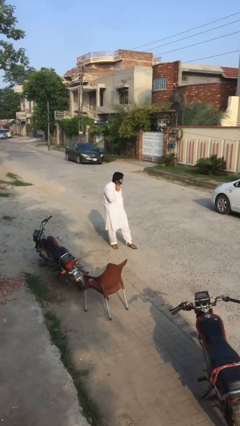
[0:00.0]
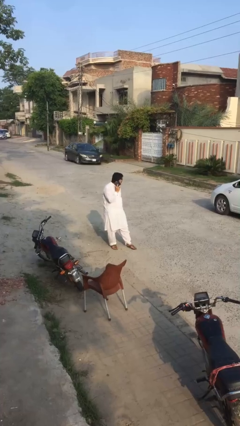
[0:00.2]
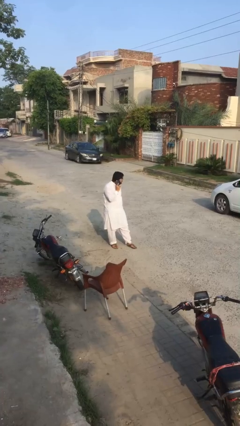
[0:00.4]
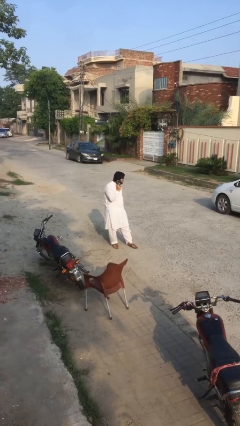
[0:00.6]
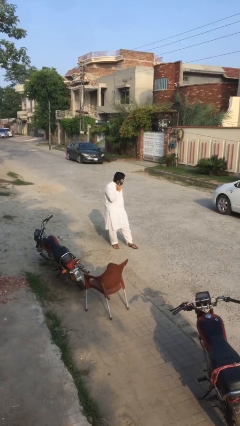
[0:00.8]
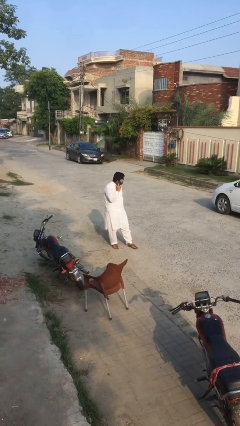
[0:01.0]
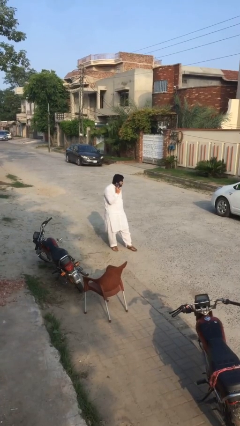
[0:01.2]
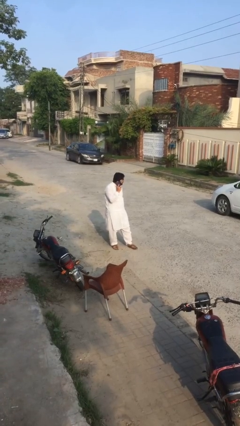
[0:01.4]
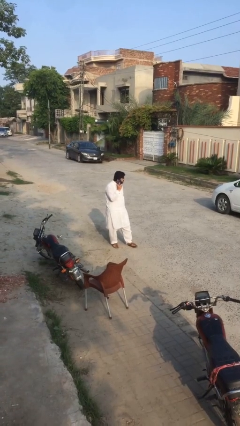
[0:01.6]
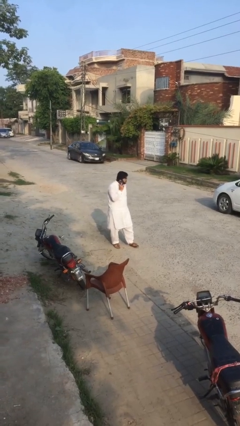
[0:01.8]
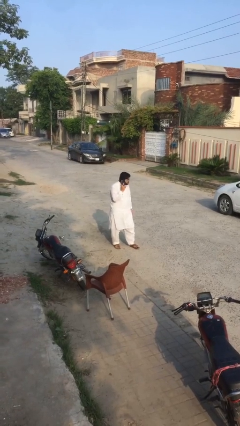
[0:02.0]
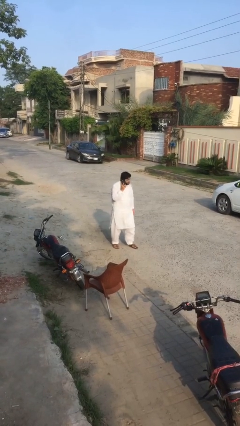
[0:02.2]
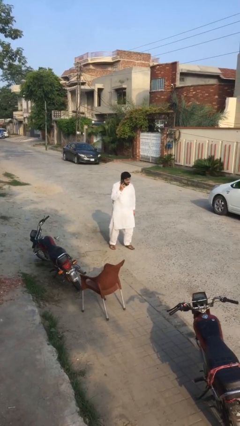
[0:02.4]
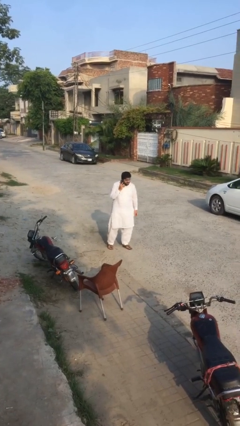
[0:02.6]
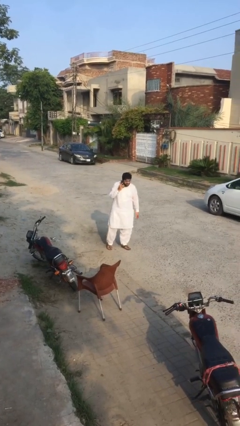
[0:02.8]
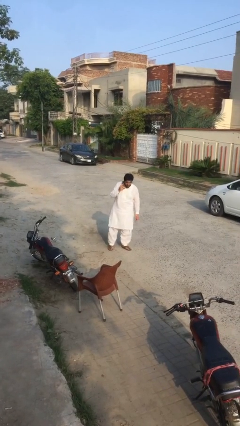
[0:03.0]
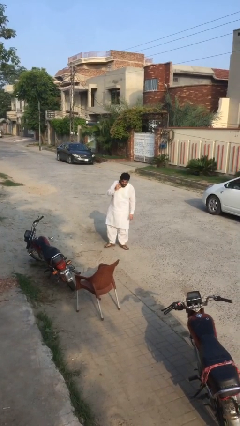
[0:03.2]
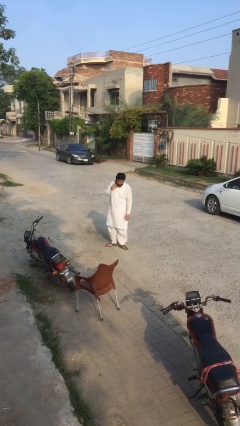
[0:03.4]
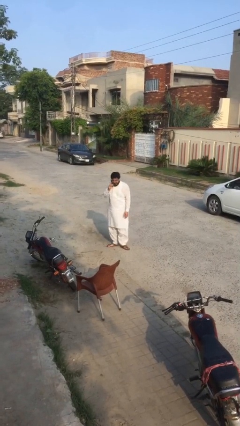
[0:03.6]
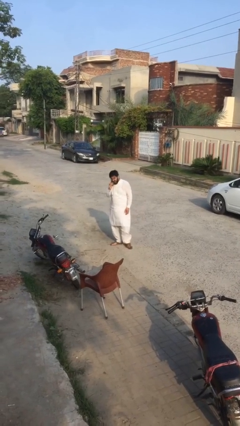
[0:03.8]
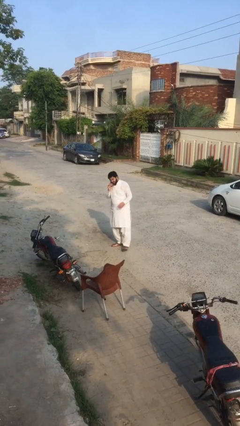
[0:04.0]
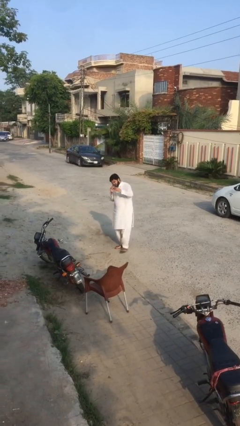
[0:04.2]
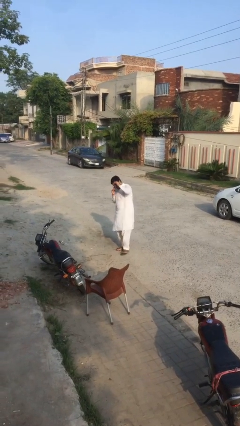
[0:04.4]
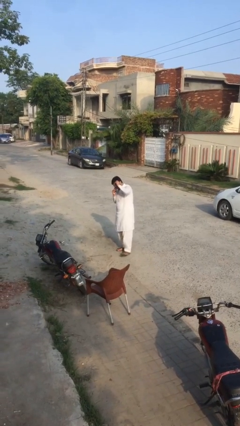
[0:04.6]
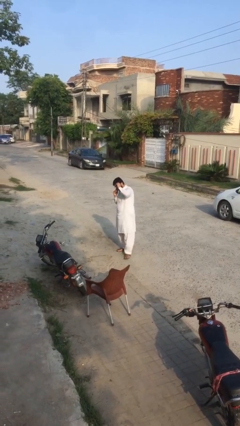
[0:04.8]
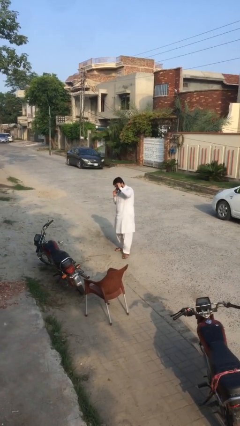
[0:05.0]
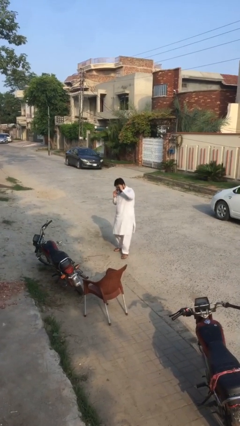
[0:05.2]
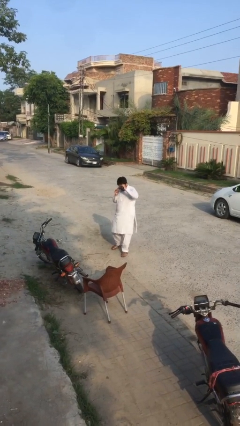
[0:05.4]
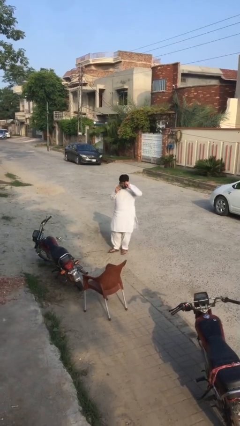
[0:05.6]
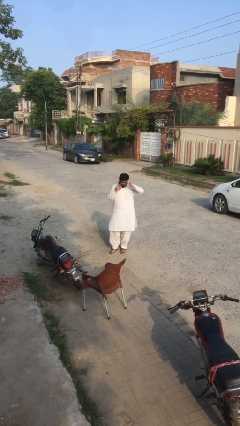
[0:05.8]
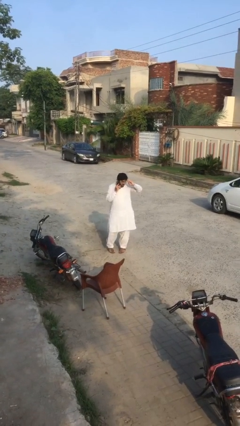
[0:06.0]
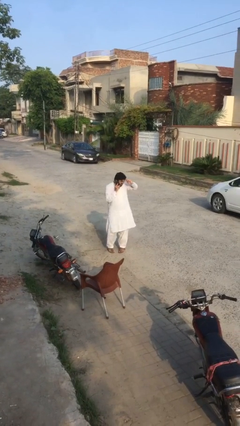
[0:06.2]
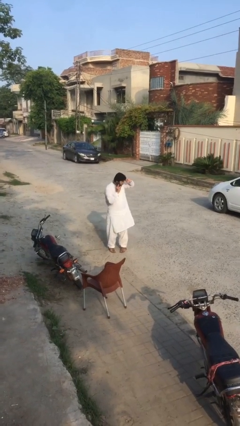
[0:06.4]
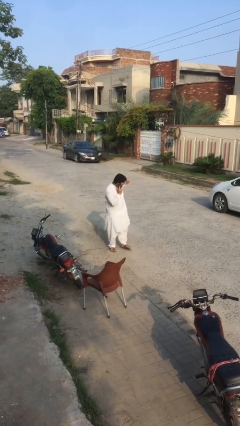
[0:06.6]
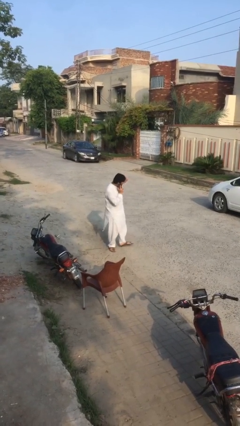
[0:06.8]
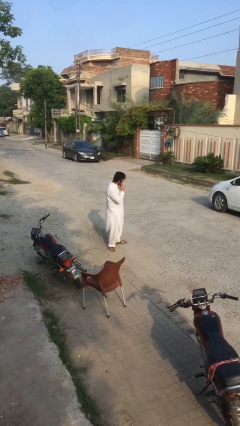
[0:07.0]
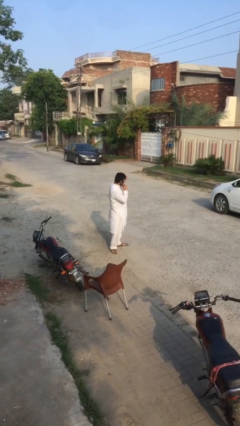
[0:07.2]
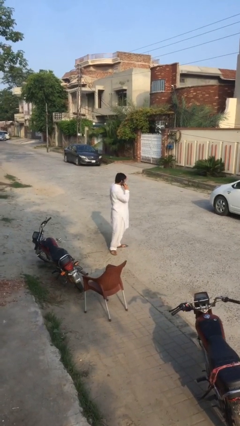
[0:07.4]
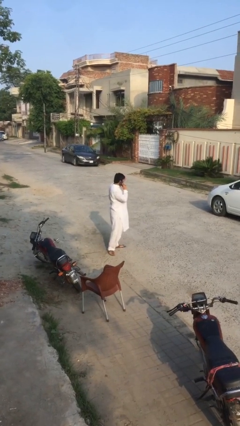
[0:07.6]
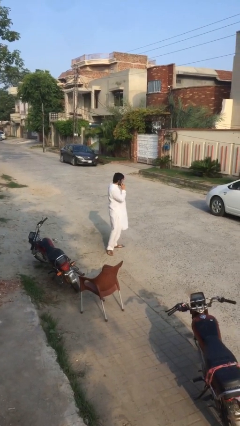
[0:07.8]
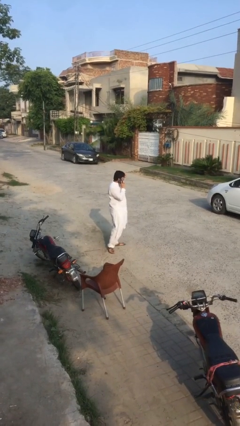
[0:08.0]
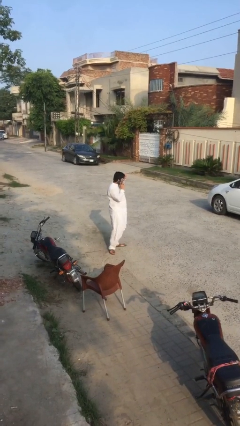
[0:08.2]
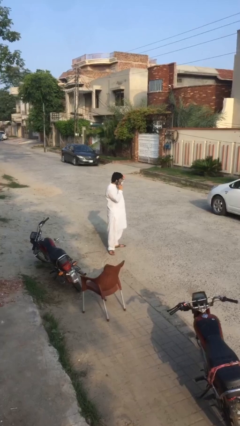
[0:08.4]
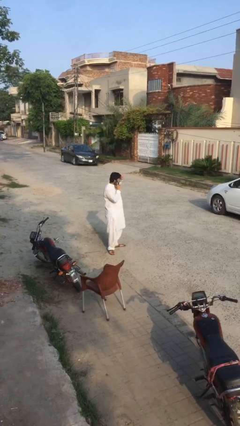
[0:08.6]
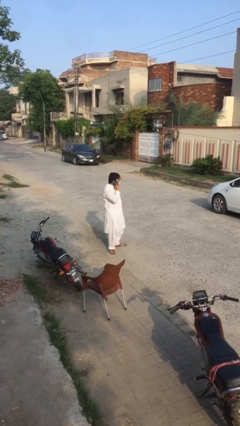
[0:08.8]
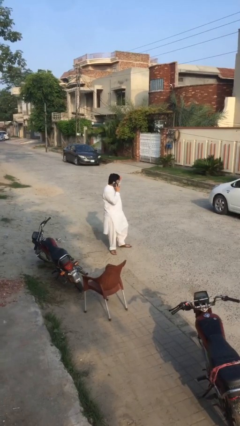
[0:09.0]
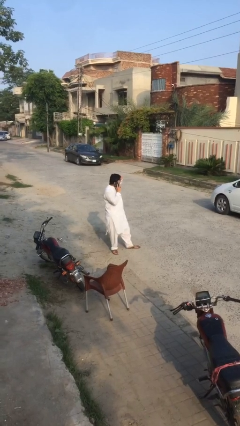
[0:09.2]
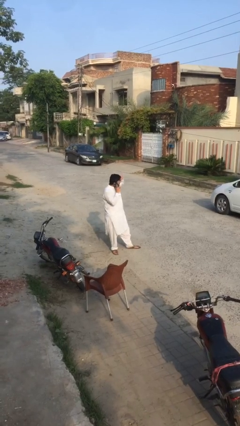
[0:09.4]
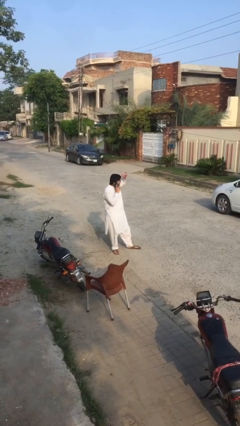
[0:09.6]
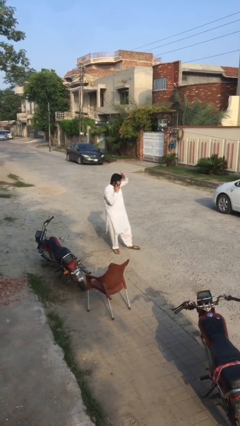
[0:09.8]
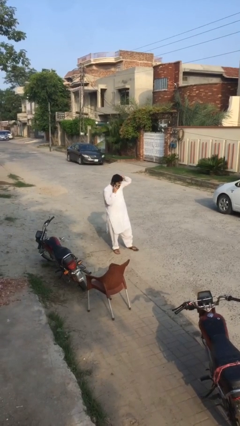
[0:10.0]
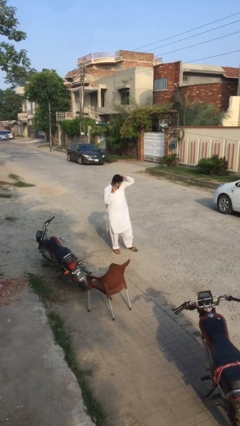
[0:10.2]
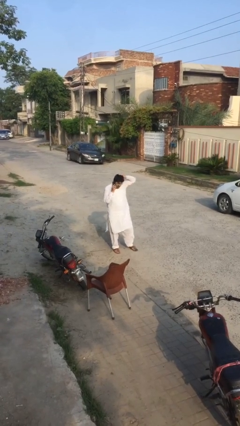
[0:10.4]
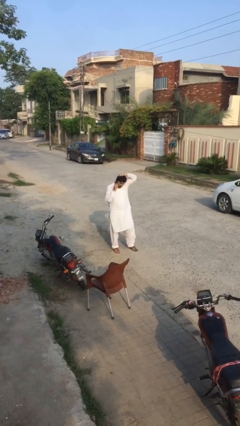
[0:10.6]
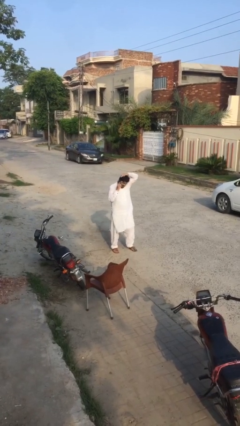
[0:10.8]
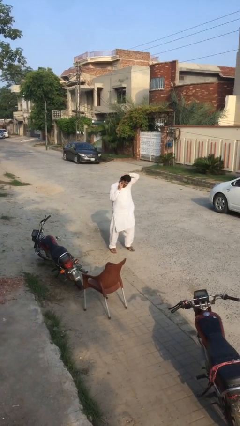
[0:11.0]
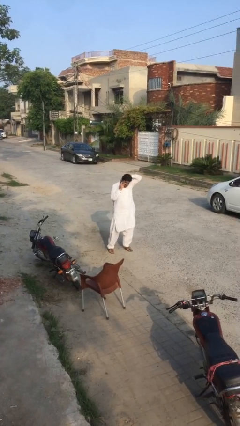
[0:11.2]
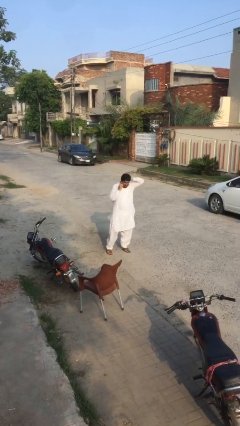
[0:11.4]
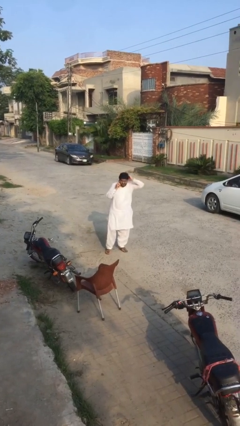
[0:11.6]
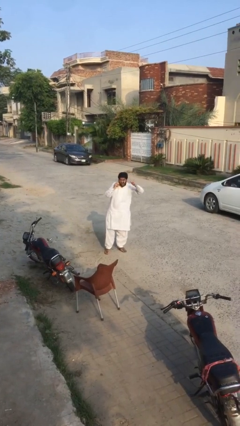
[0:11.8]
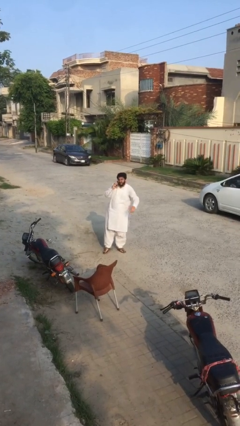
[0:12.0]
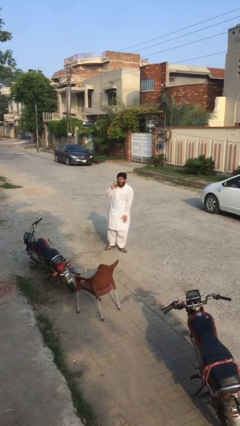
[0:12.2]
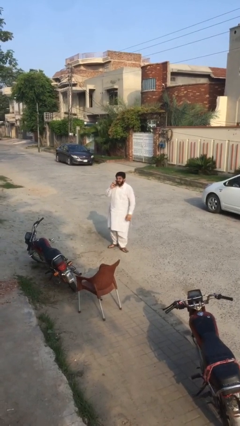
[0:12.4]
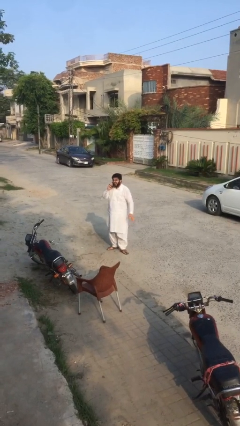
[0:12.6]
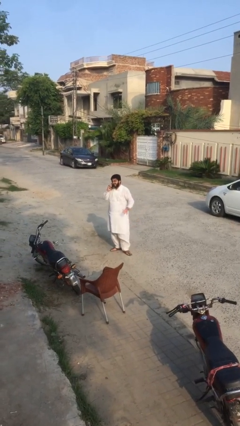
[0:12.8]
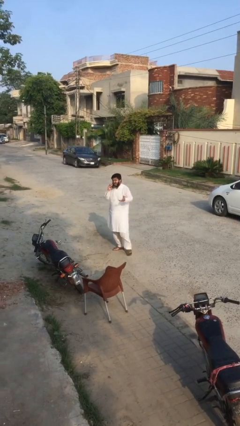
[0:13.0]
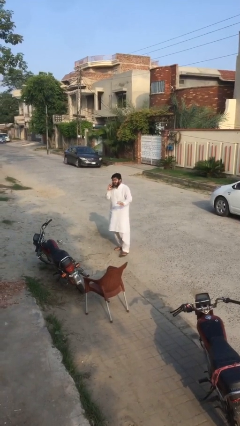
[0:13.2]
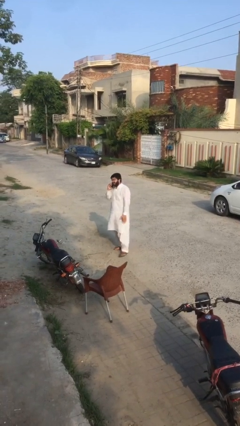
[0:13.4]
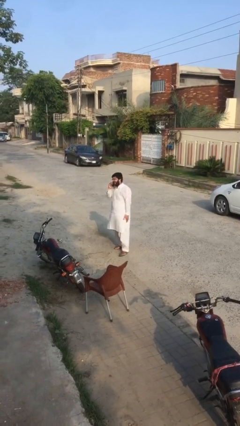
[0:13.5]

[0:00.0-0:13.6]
person talks on phone

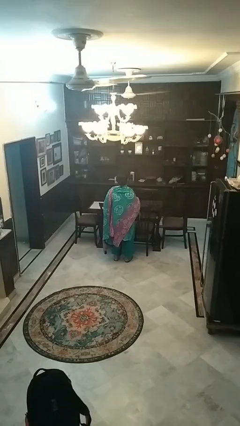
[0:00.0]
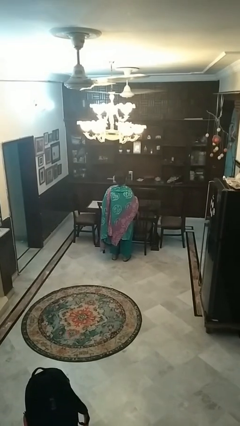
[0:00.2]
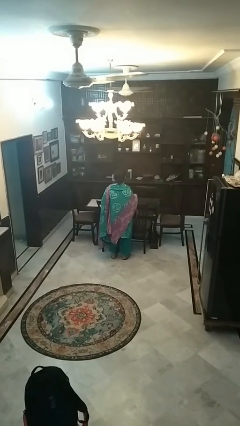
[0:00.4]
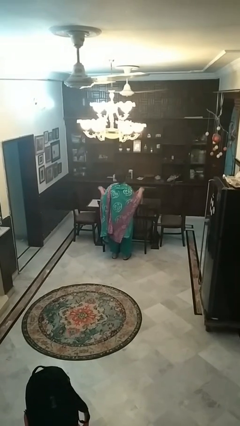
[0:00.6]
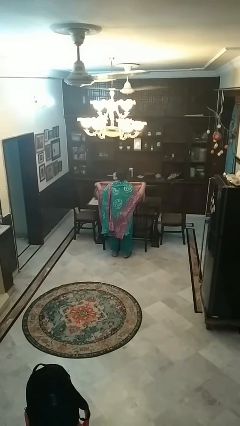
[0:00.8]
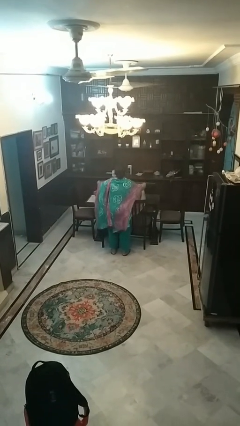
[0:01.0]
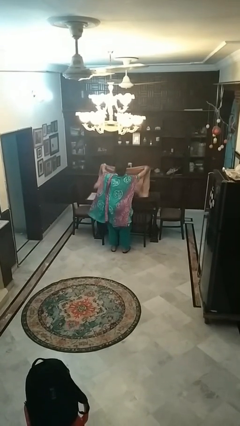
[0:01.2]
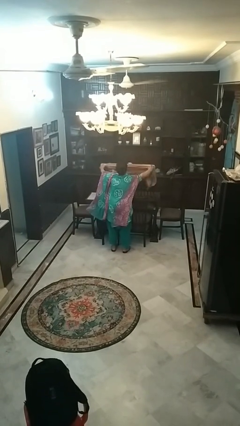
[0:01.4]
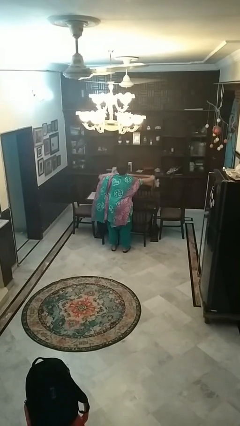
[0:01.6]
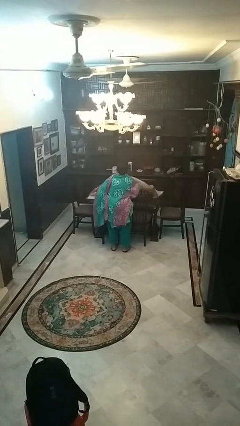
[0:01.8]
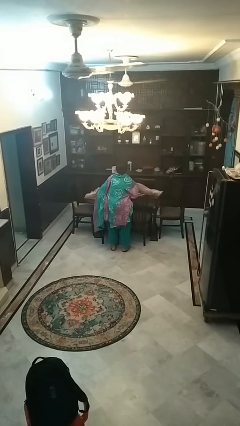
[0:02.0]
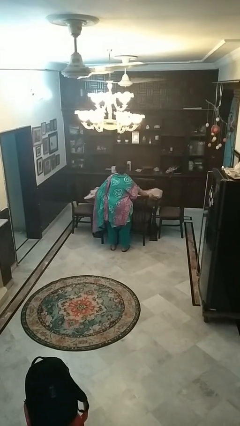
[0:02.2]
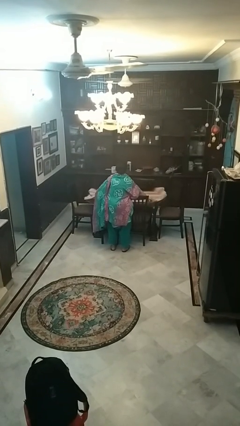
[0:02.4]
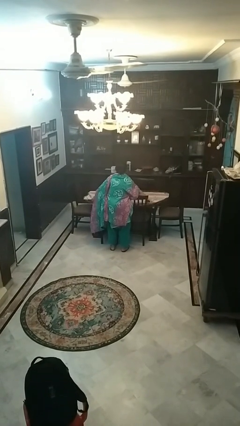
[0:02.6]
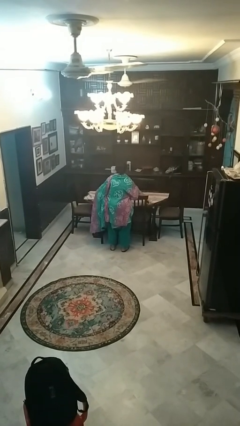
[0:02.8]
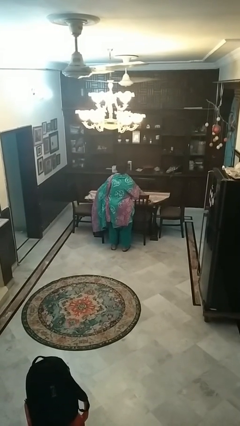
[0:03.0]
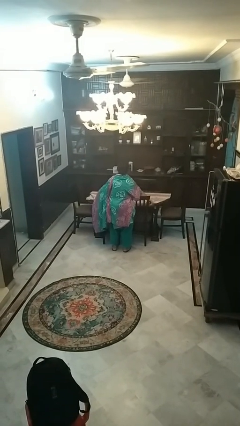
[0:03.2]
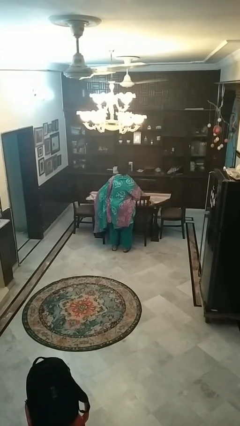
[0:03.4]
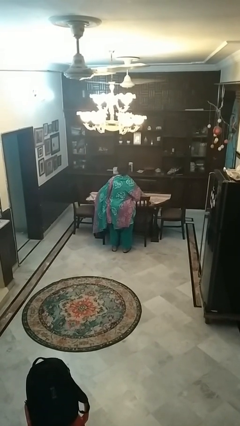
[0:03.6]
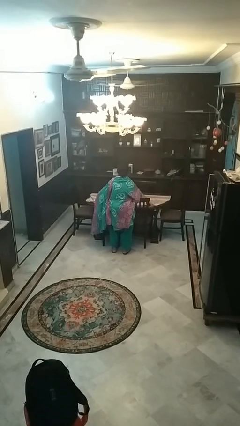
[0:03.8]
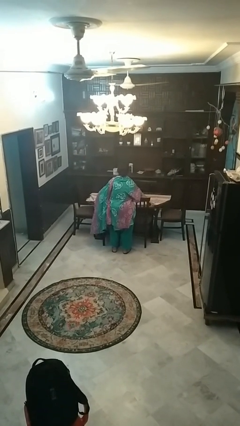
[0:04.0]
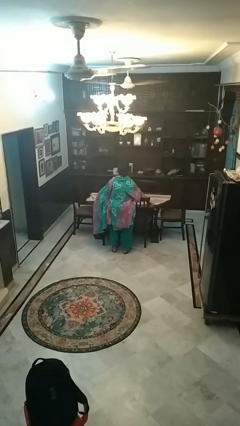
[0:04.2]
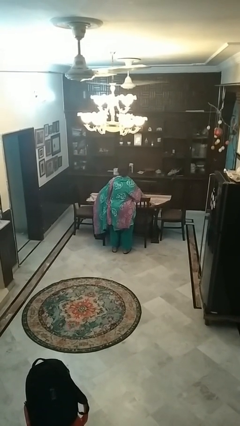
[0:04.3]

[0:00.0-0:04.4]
person spreads tablecloth
